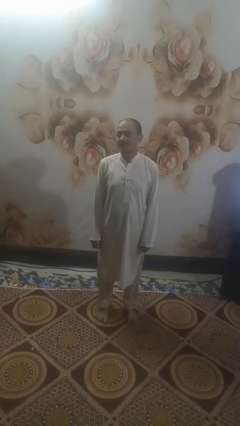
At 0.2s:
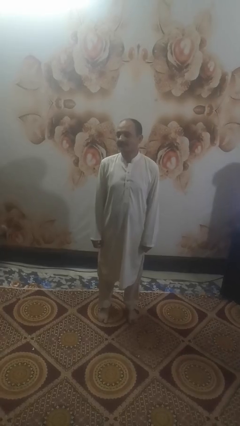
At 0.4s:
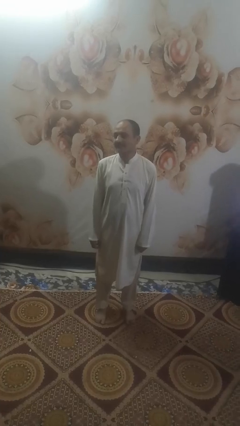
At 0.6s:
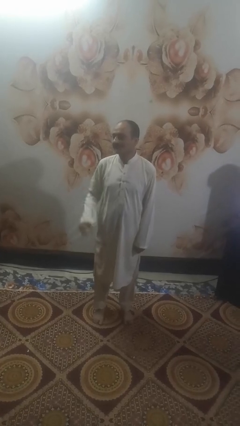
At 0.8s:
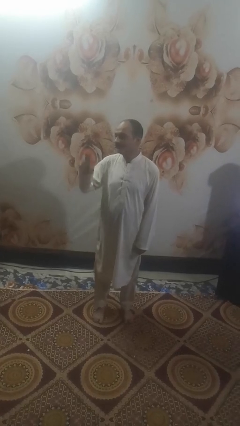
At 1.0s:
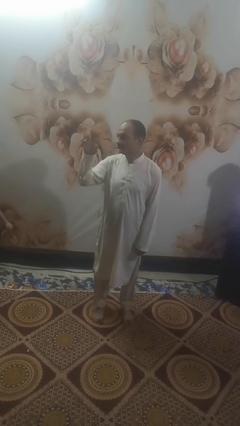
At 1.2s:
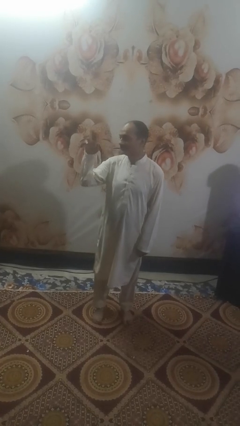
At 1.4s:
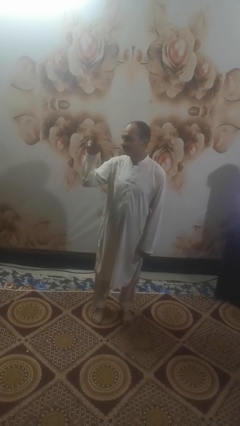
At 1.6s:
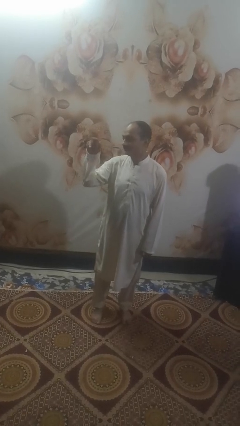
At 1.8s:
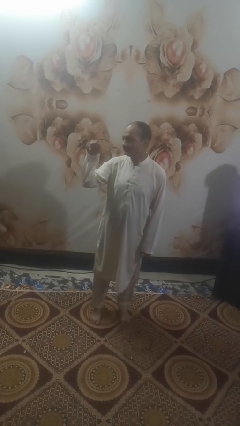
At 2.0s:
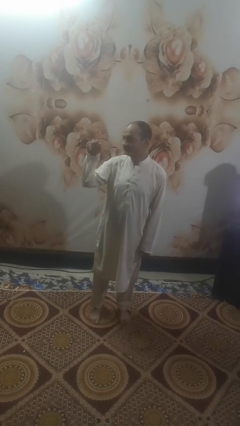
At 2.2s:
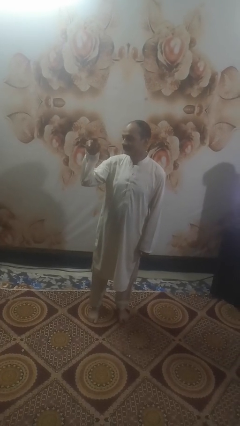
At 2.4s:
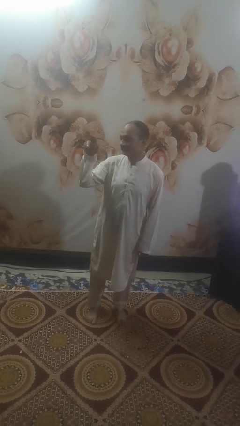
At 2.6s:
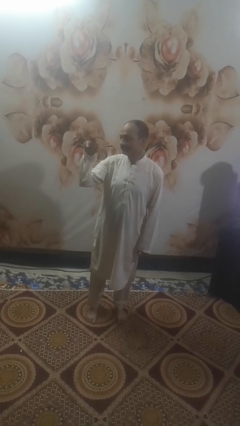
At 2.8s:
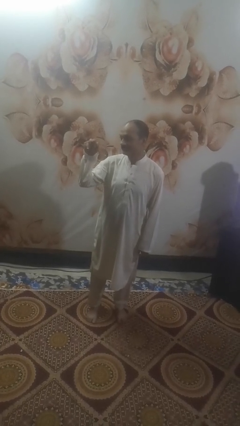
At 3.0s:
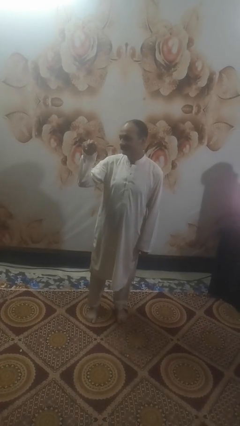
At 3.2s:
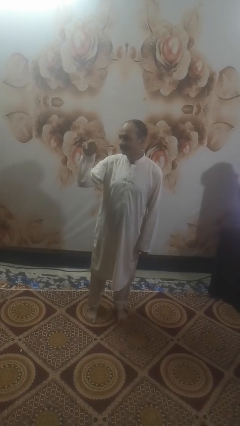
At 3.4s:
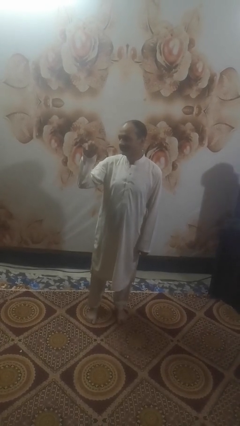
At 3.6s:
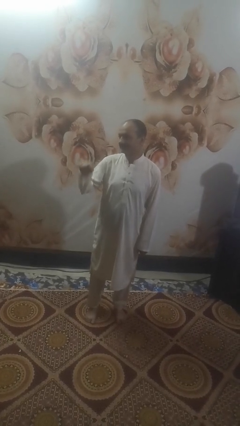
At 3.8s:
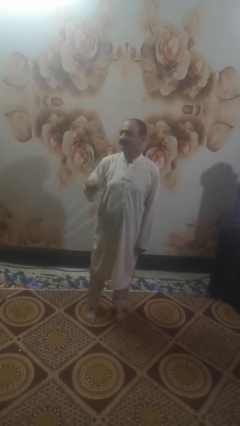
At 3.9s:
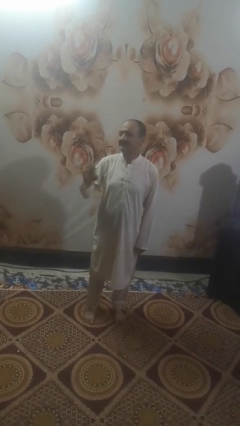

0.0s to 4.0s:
person gestures come here

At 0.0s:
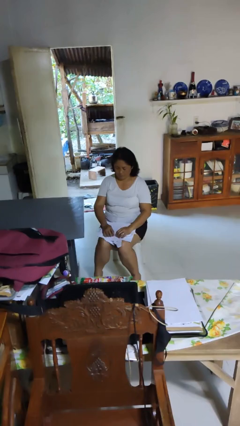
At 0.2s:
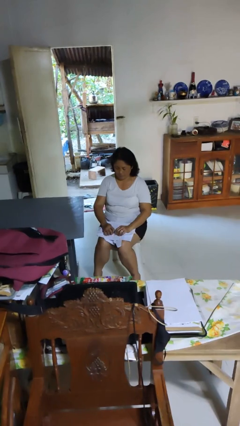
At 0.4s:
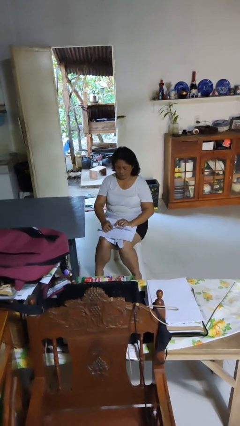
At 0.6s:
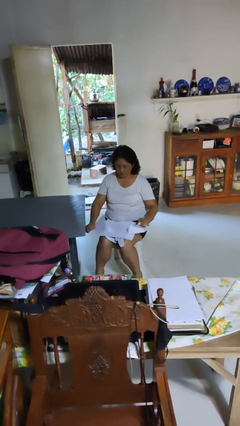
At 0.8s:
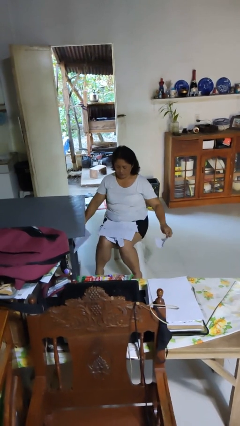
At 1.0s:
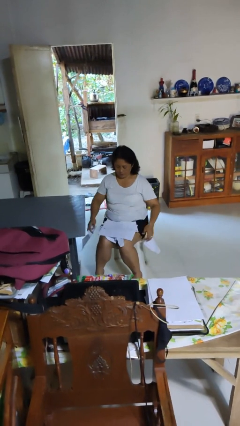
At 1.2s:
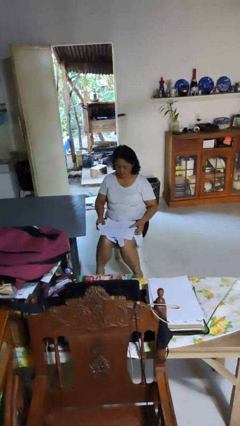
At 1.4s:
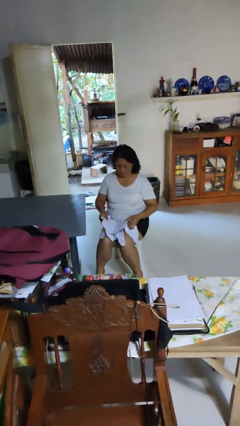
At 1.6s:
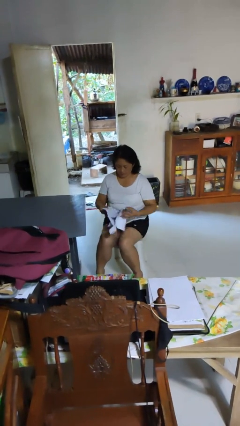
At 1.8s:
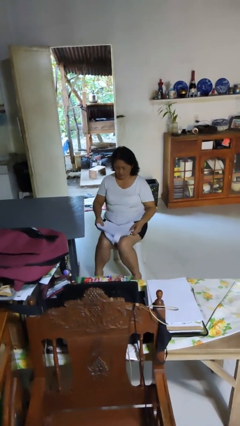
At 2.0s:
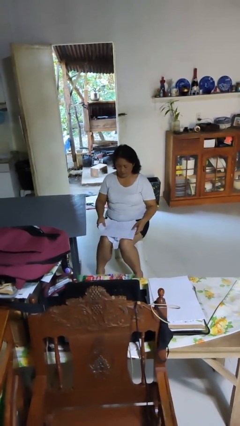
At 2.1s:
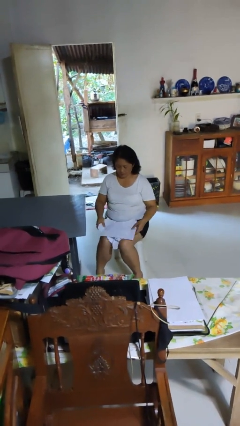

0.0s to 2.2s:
person tears paper

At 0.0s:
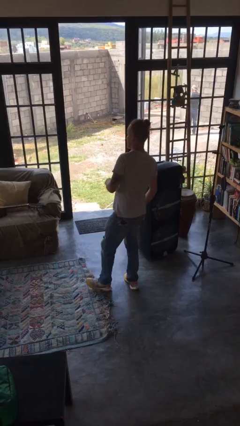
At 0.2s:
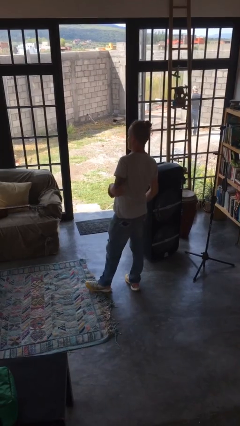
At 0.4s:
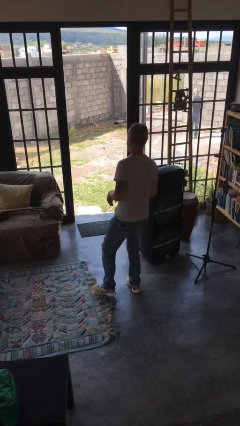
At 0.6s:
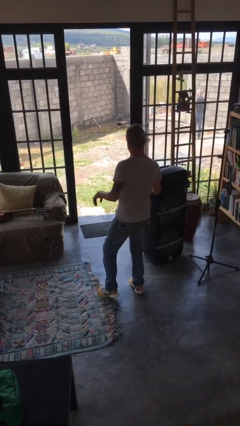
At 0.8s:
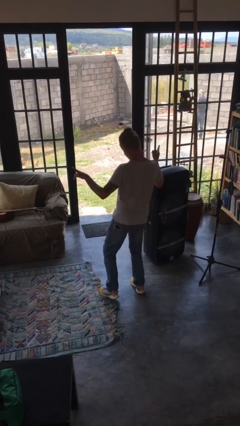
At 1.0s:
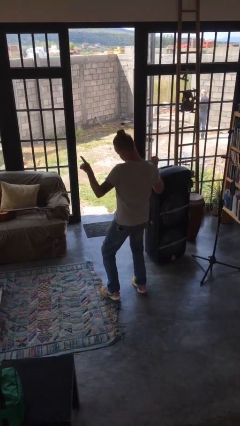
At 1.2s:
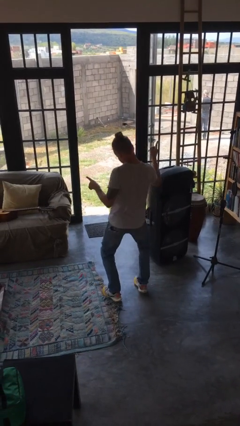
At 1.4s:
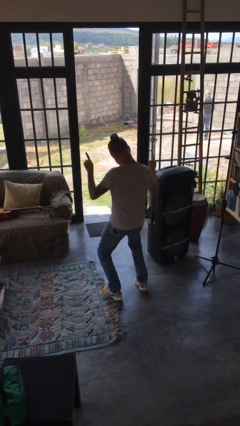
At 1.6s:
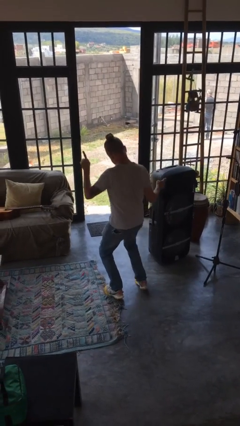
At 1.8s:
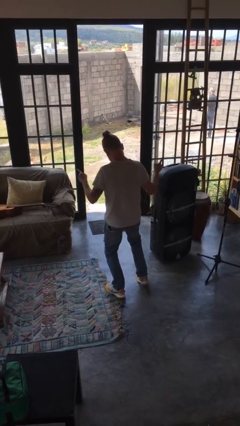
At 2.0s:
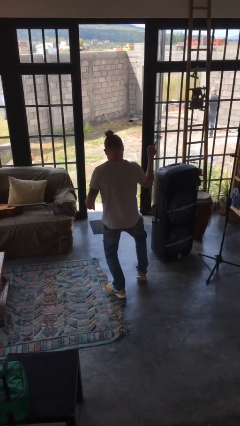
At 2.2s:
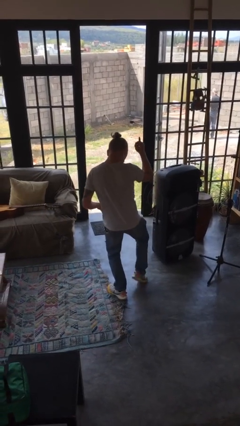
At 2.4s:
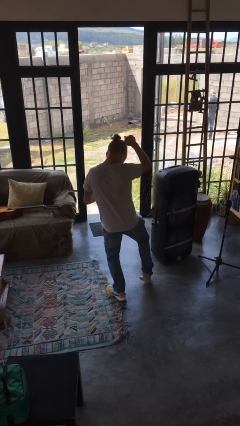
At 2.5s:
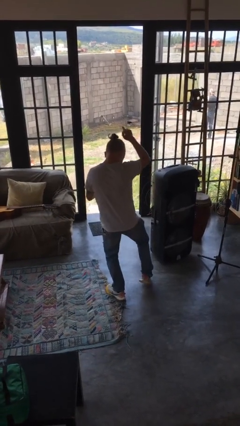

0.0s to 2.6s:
person dances in place

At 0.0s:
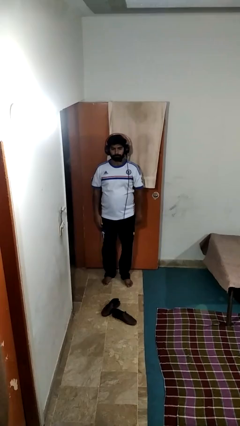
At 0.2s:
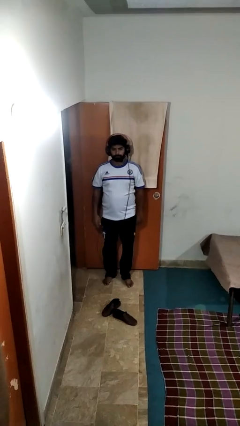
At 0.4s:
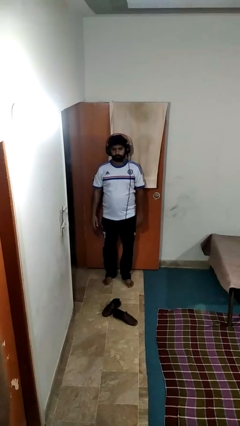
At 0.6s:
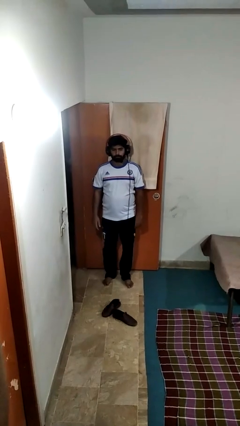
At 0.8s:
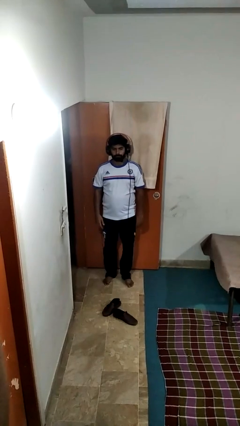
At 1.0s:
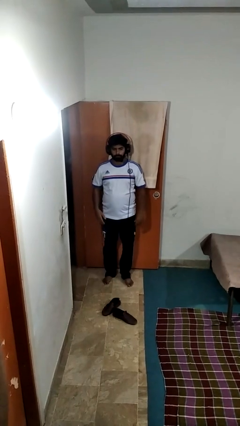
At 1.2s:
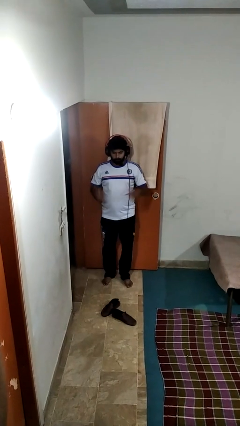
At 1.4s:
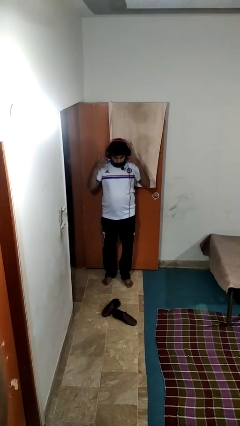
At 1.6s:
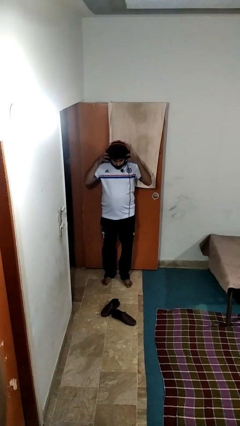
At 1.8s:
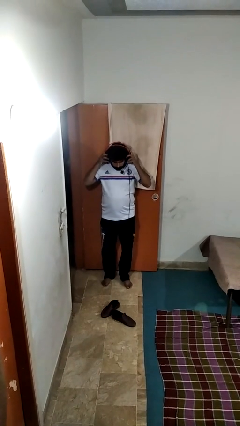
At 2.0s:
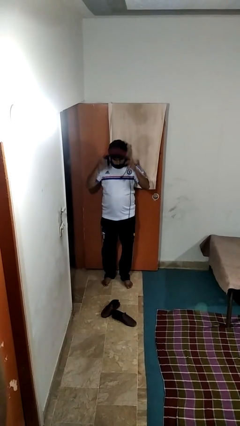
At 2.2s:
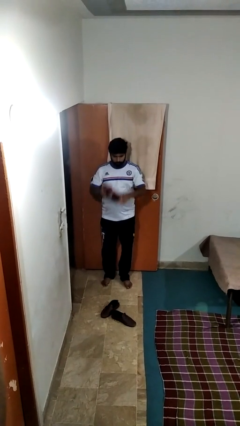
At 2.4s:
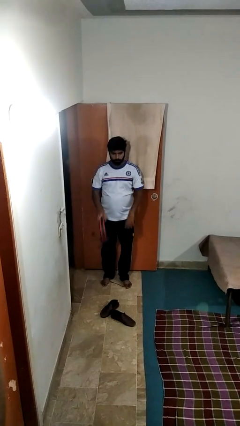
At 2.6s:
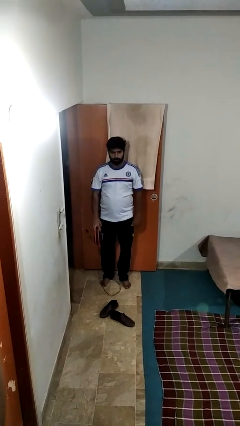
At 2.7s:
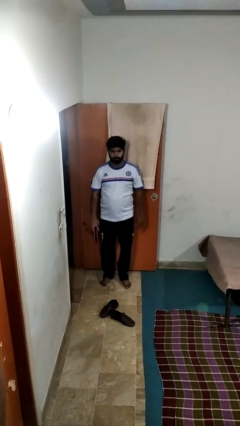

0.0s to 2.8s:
person takes off headphones

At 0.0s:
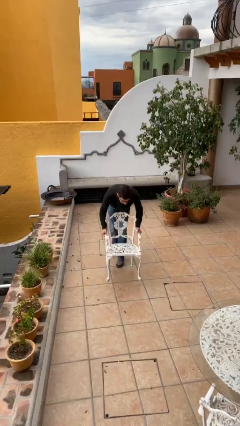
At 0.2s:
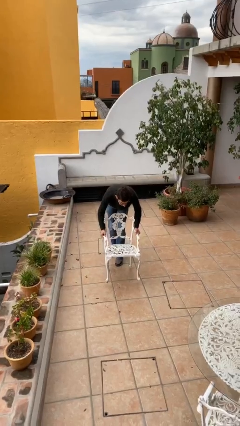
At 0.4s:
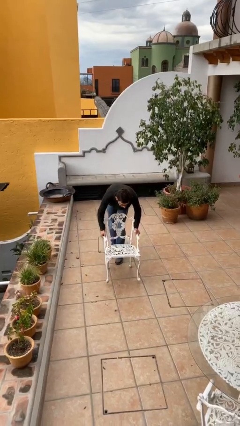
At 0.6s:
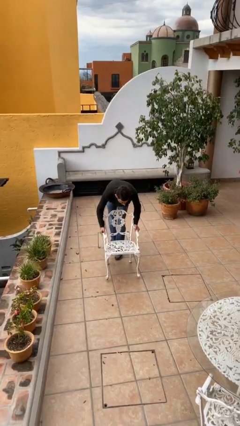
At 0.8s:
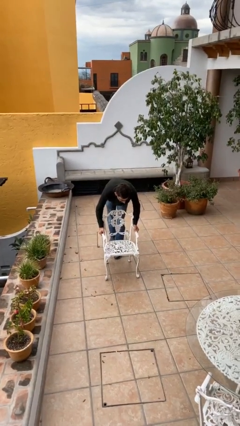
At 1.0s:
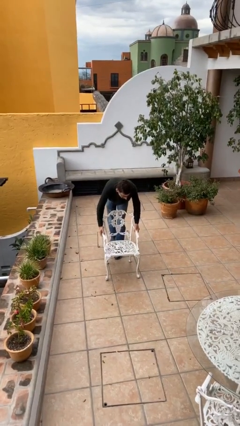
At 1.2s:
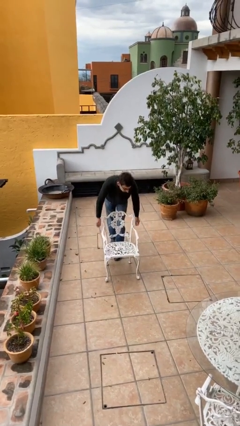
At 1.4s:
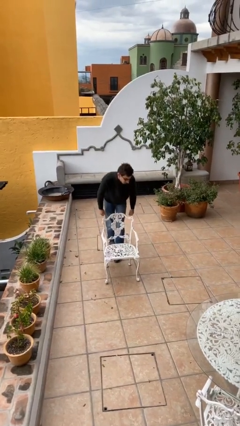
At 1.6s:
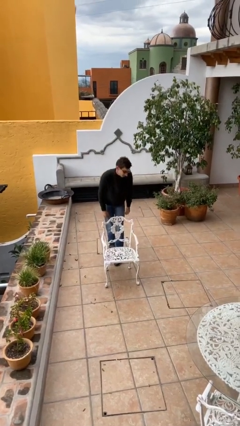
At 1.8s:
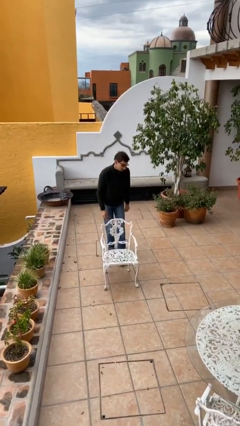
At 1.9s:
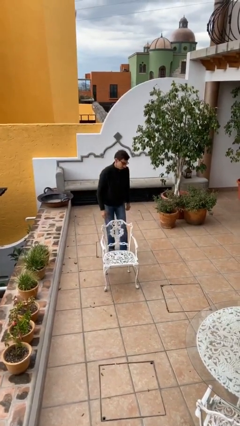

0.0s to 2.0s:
person puts down object on floor

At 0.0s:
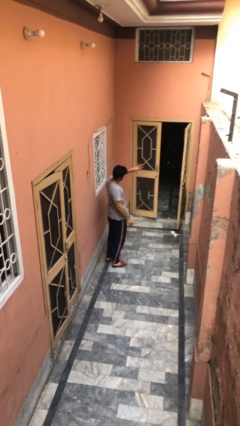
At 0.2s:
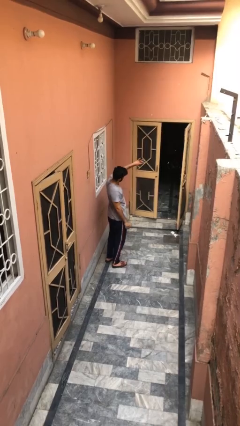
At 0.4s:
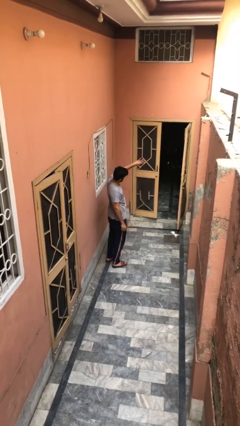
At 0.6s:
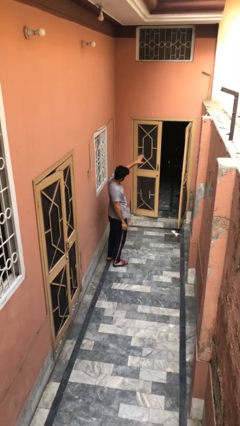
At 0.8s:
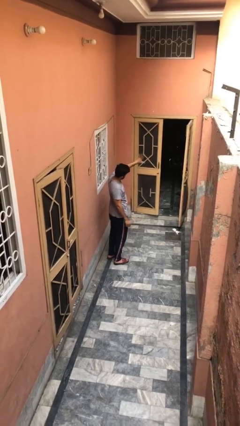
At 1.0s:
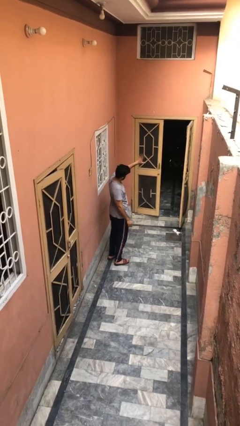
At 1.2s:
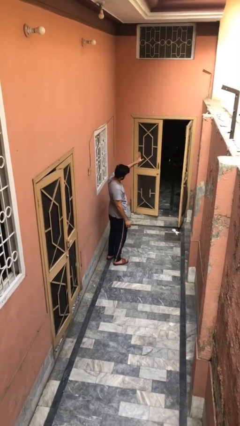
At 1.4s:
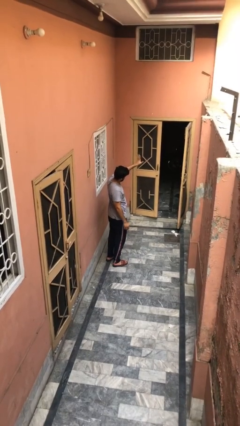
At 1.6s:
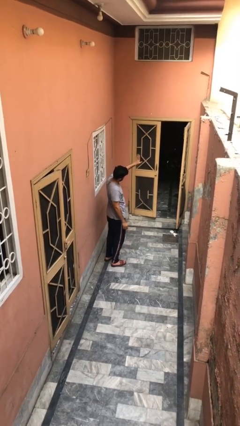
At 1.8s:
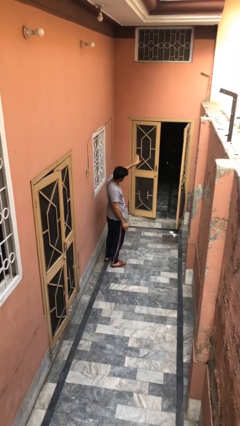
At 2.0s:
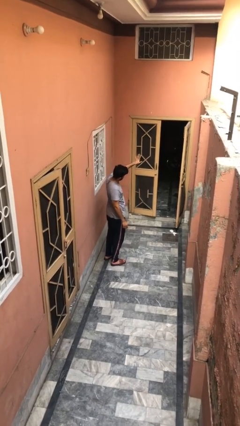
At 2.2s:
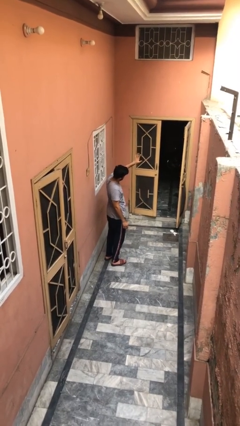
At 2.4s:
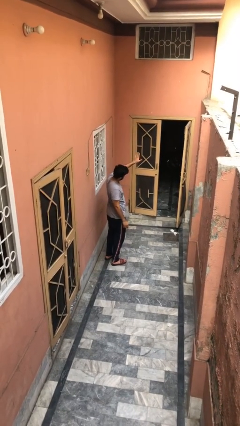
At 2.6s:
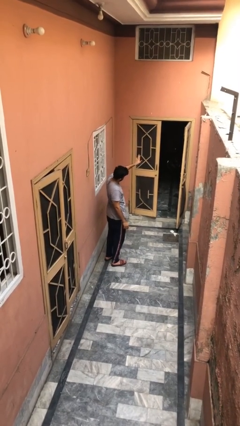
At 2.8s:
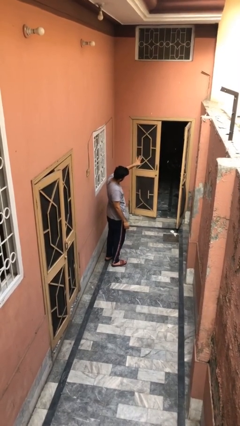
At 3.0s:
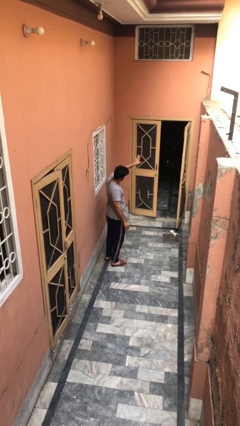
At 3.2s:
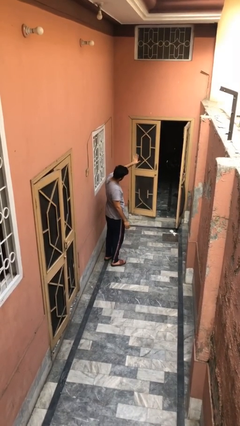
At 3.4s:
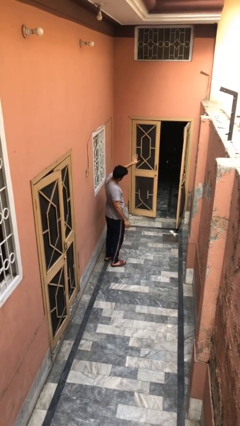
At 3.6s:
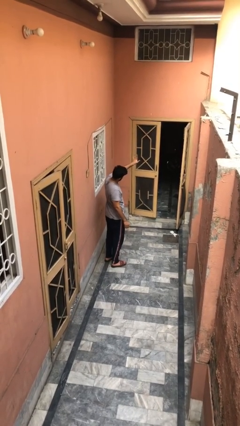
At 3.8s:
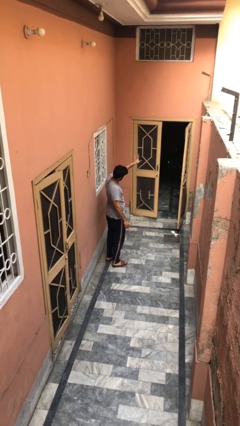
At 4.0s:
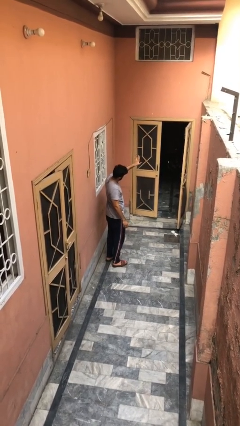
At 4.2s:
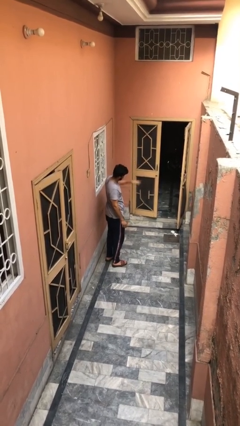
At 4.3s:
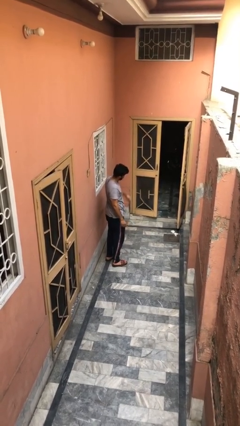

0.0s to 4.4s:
person waves at person
